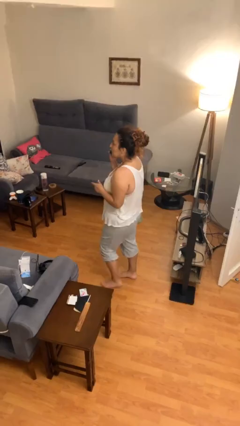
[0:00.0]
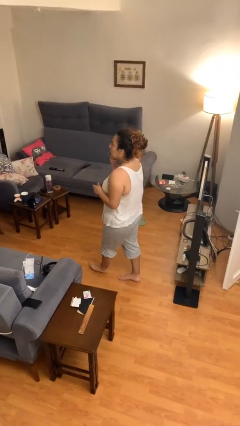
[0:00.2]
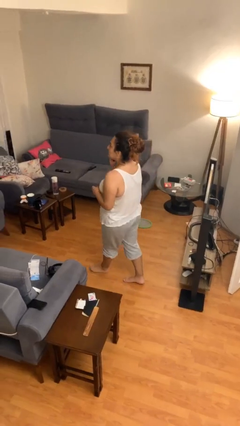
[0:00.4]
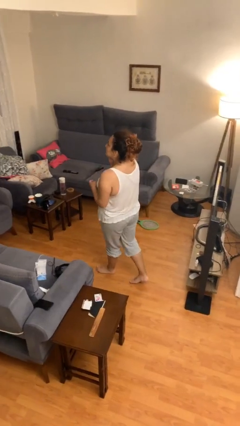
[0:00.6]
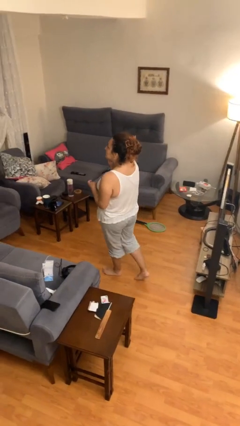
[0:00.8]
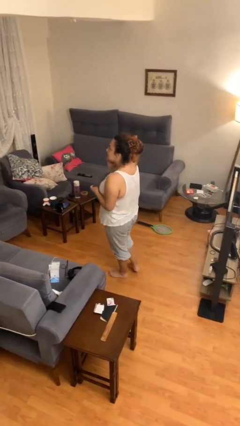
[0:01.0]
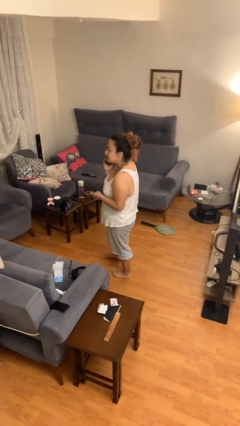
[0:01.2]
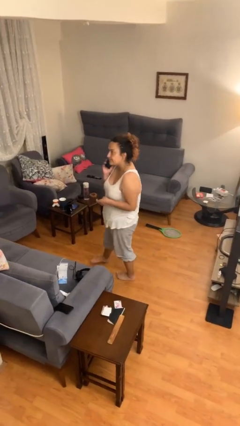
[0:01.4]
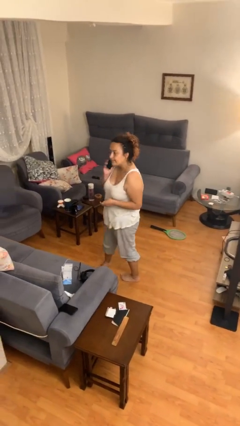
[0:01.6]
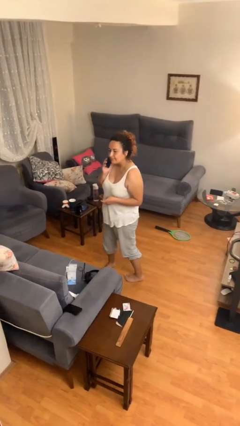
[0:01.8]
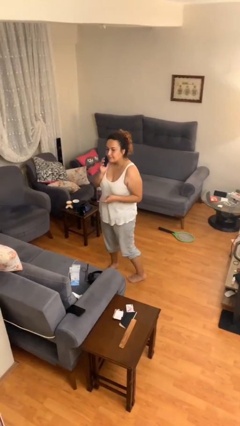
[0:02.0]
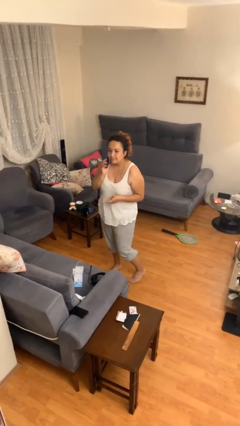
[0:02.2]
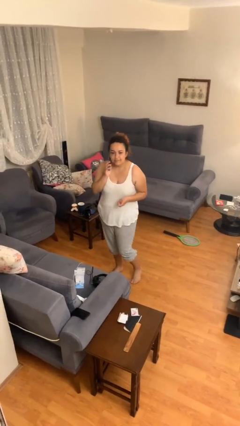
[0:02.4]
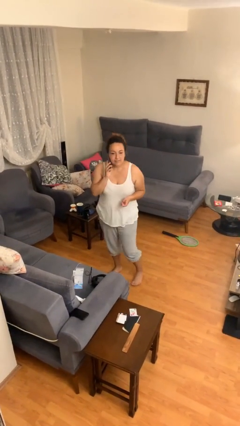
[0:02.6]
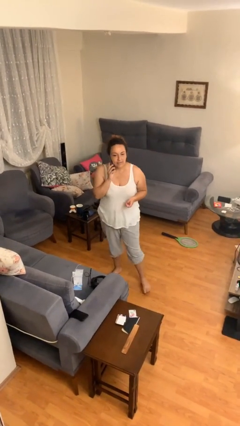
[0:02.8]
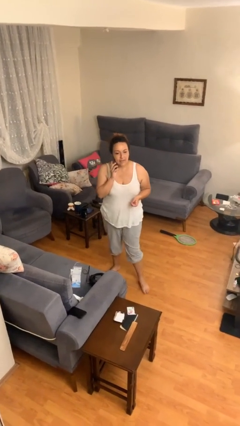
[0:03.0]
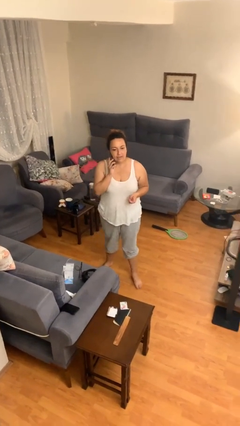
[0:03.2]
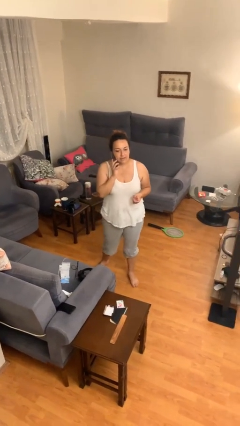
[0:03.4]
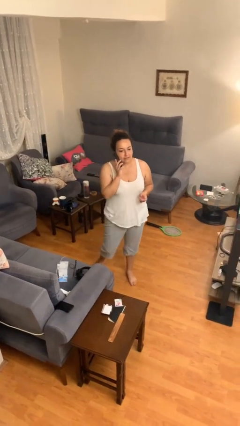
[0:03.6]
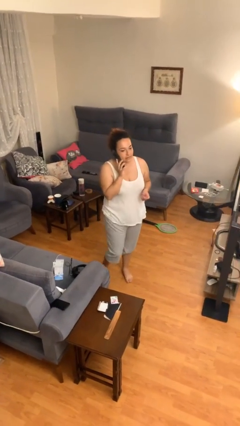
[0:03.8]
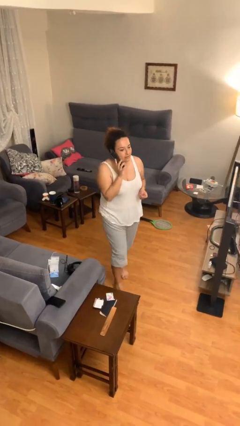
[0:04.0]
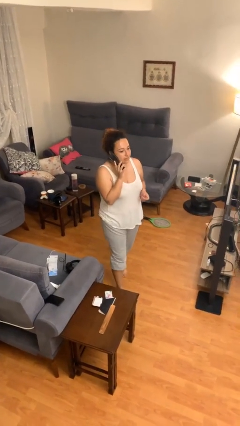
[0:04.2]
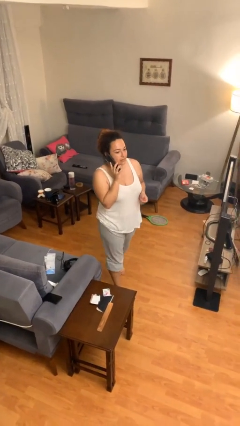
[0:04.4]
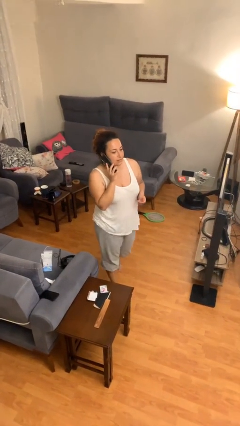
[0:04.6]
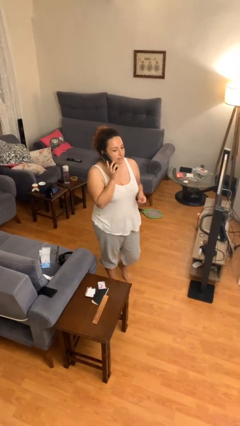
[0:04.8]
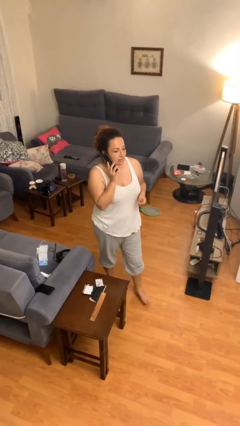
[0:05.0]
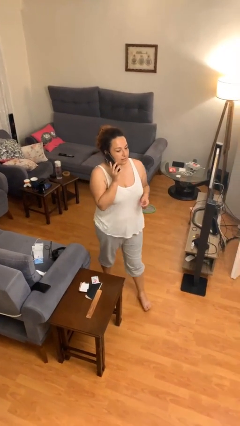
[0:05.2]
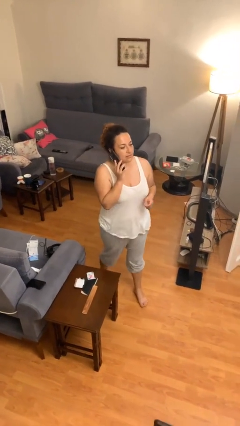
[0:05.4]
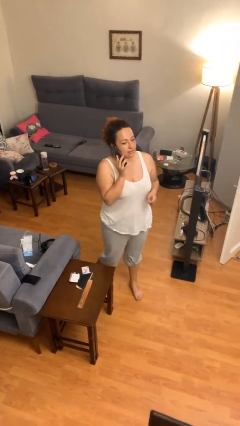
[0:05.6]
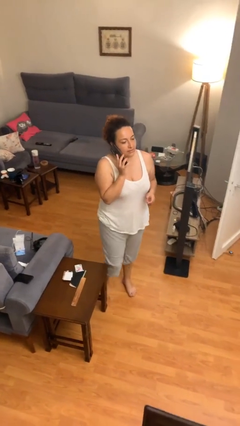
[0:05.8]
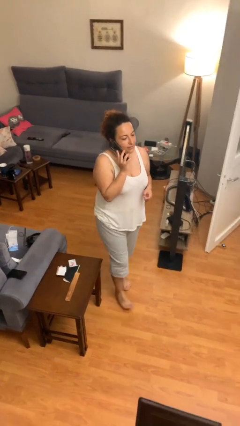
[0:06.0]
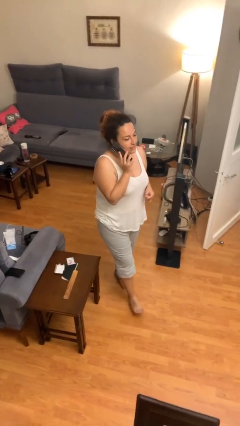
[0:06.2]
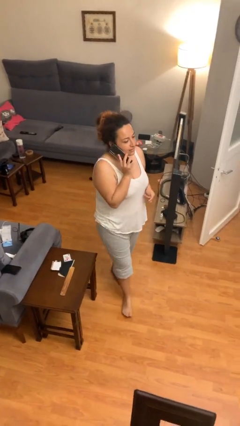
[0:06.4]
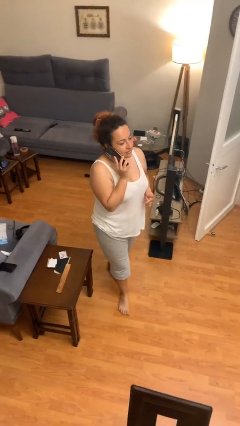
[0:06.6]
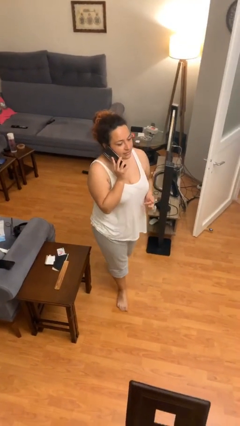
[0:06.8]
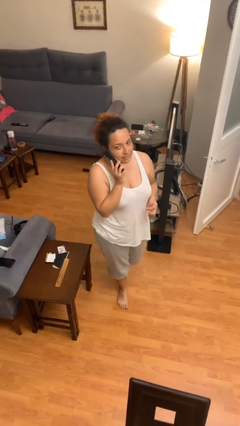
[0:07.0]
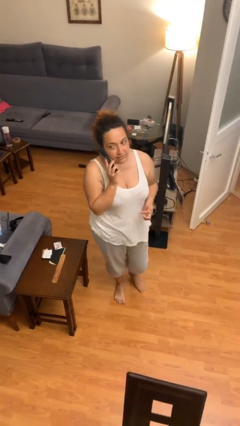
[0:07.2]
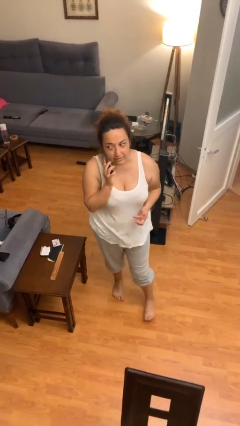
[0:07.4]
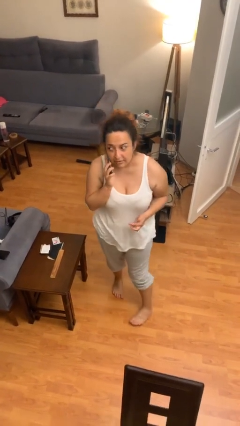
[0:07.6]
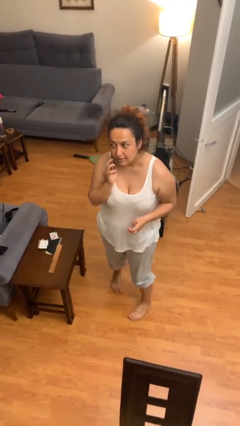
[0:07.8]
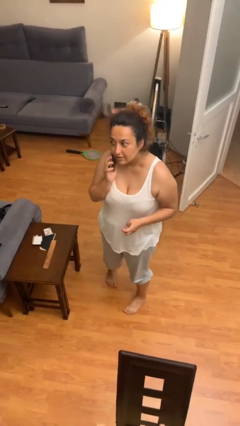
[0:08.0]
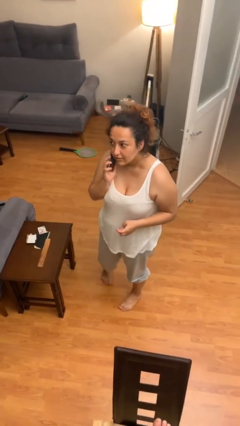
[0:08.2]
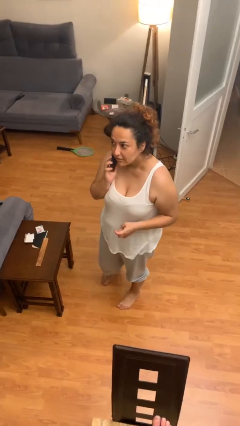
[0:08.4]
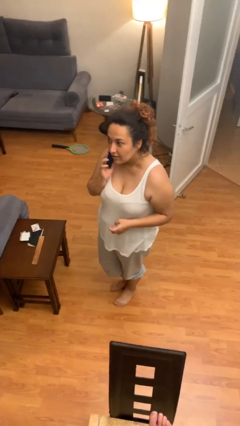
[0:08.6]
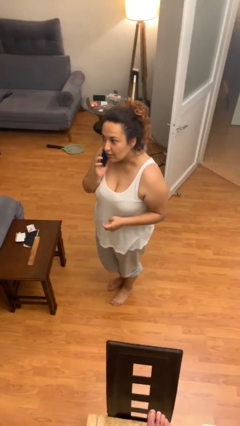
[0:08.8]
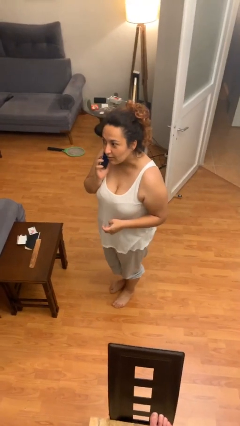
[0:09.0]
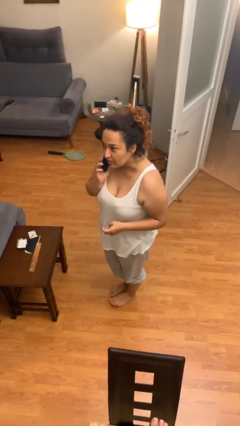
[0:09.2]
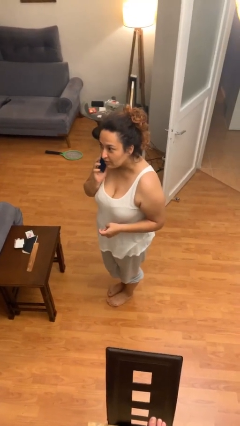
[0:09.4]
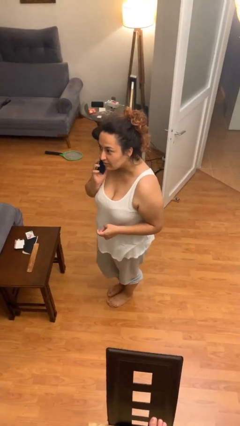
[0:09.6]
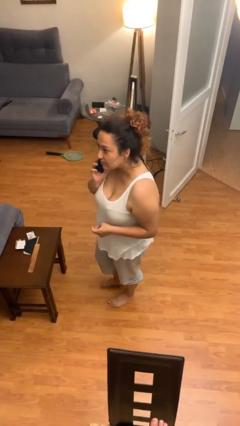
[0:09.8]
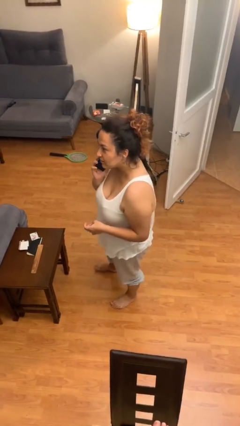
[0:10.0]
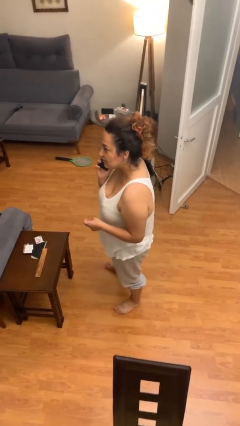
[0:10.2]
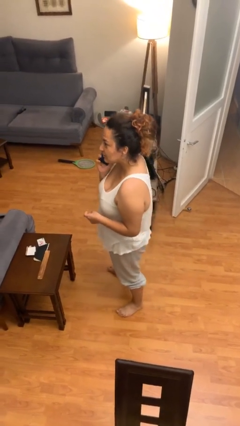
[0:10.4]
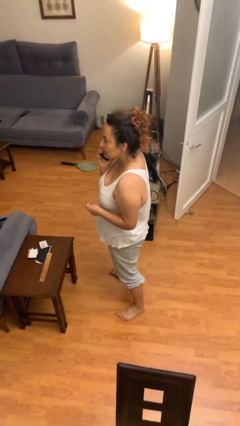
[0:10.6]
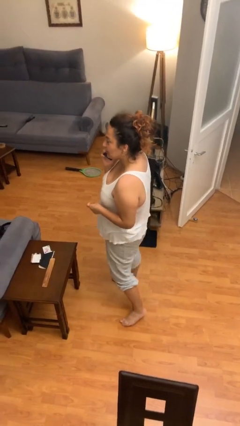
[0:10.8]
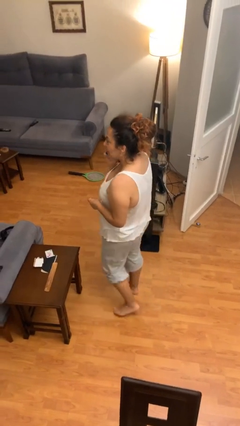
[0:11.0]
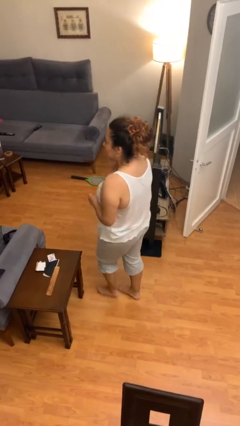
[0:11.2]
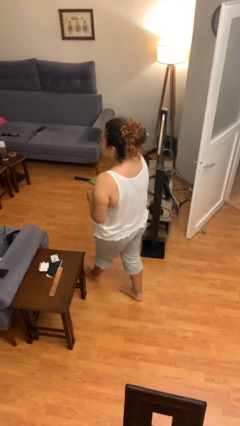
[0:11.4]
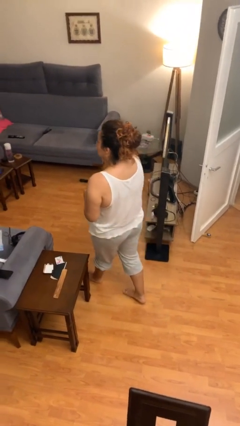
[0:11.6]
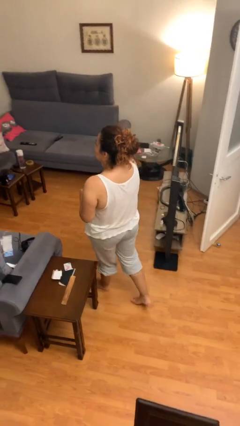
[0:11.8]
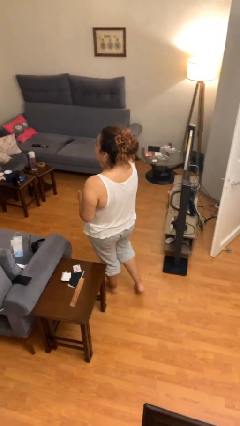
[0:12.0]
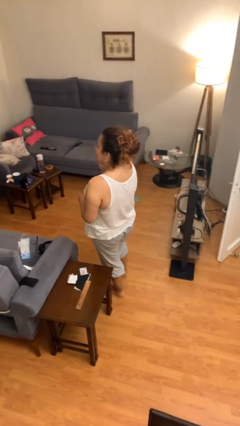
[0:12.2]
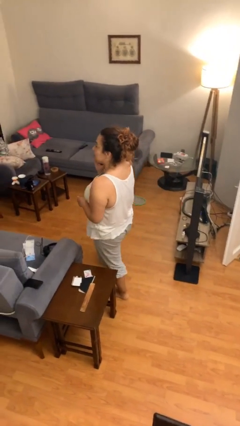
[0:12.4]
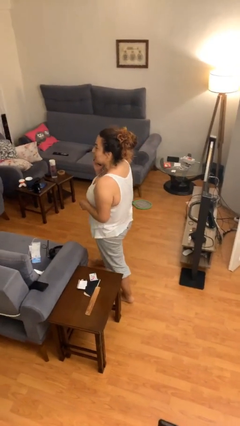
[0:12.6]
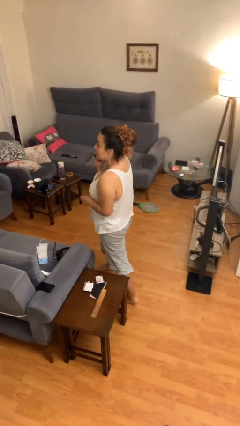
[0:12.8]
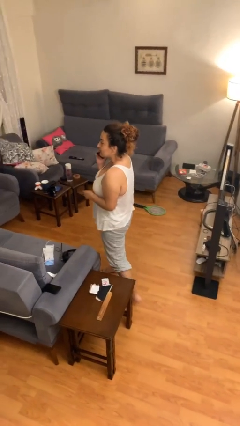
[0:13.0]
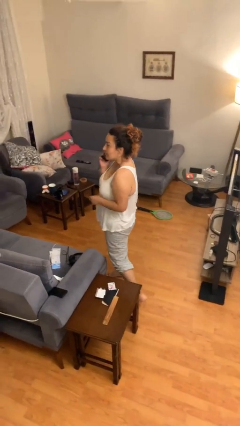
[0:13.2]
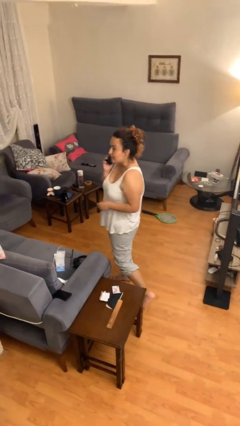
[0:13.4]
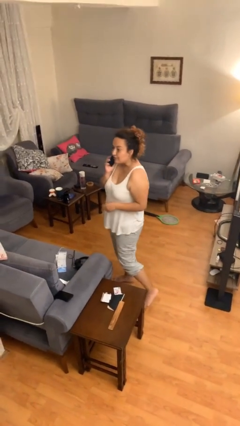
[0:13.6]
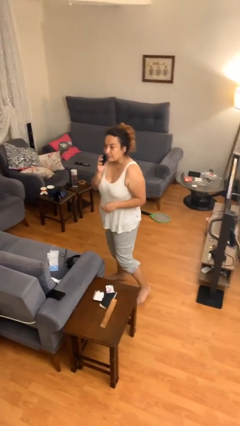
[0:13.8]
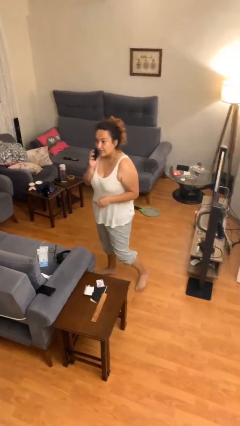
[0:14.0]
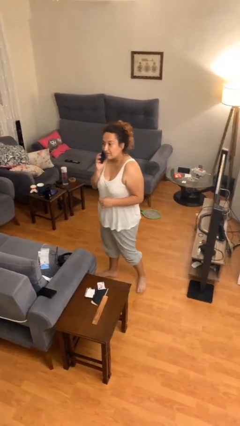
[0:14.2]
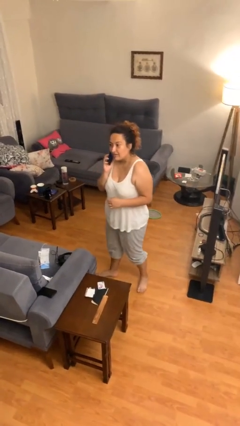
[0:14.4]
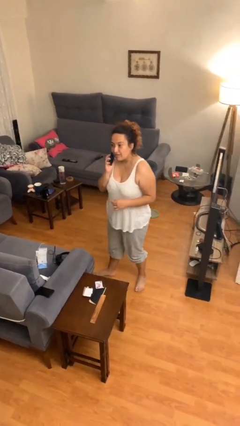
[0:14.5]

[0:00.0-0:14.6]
person talks on phone

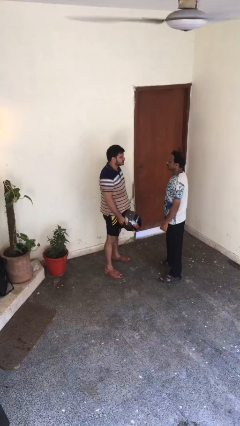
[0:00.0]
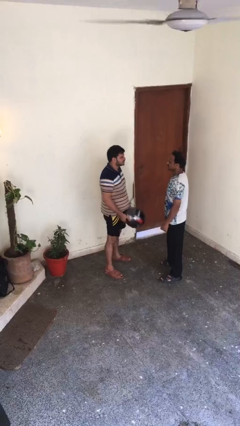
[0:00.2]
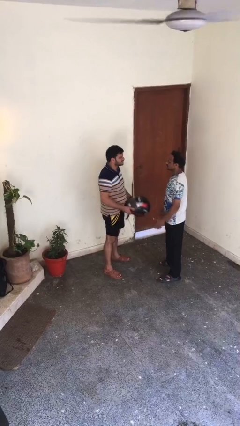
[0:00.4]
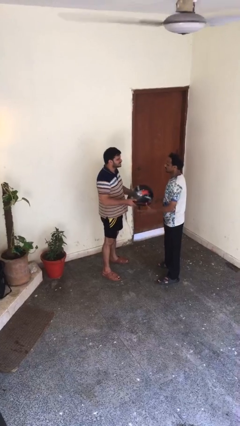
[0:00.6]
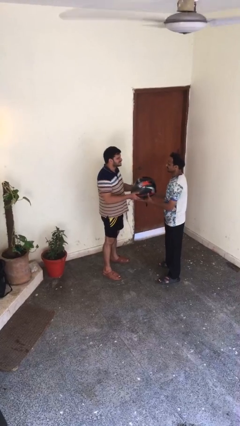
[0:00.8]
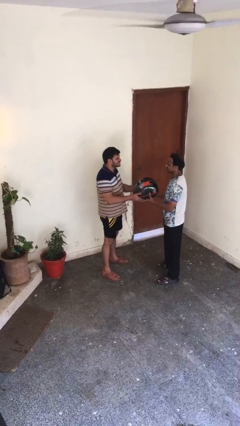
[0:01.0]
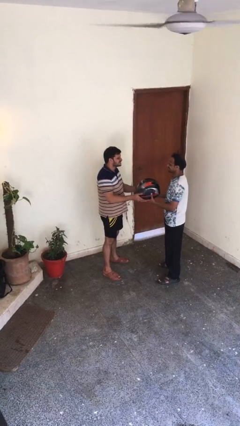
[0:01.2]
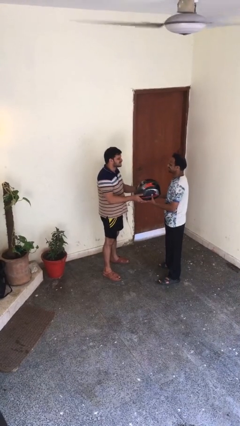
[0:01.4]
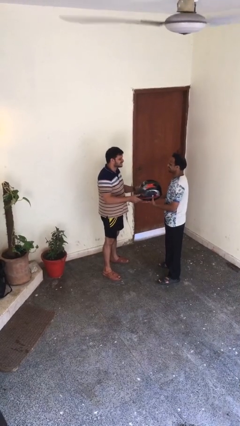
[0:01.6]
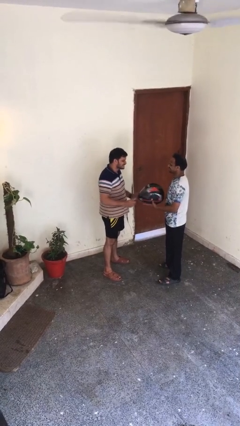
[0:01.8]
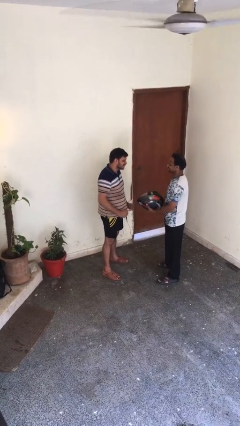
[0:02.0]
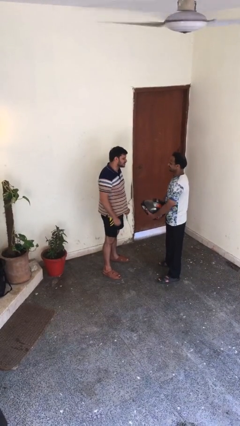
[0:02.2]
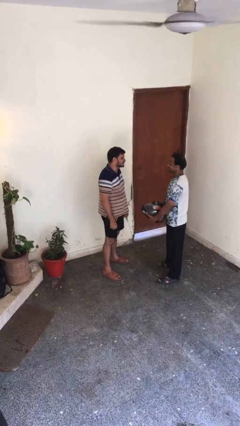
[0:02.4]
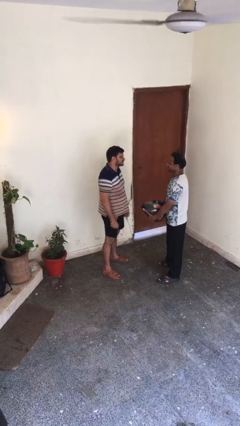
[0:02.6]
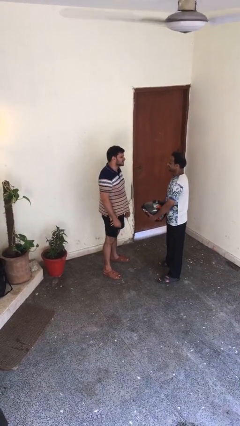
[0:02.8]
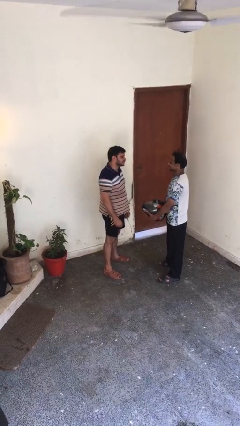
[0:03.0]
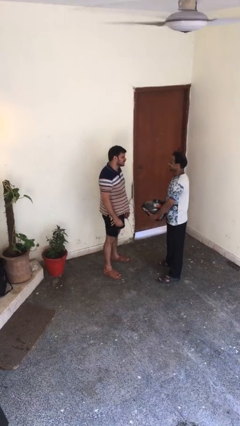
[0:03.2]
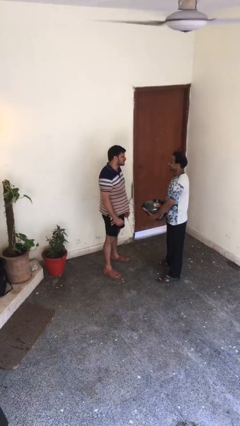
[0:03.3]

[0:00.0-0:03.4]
person transfers object to person
